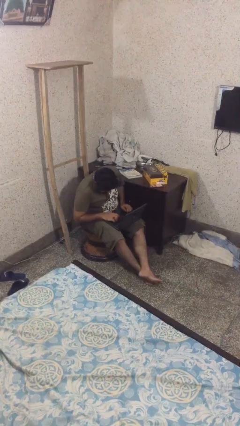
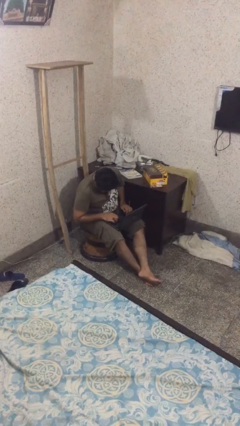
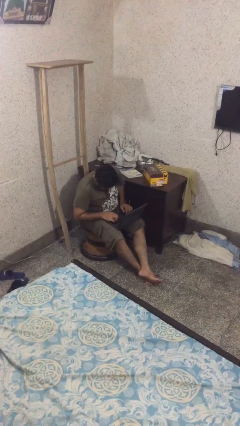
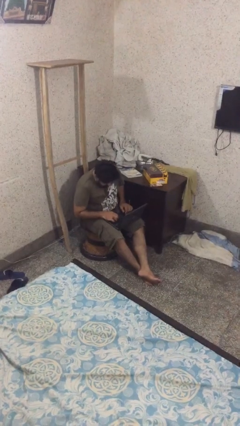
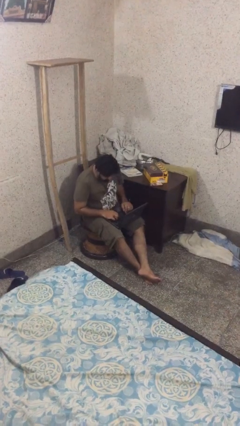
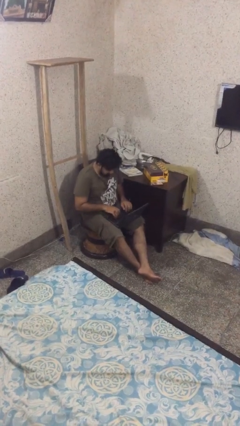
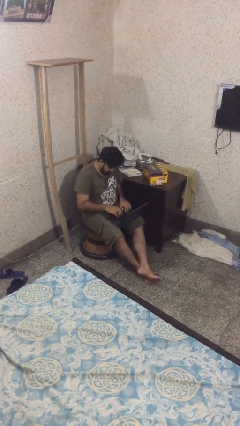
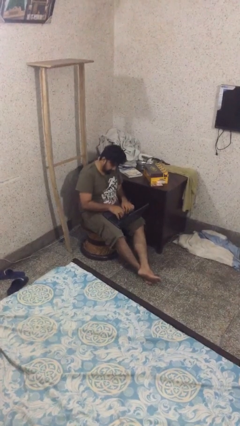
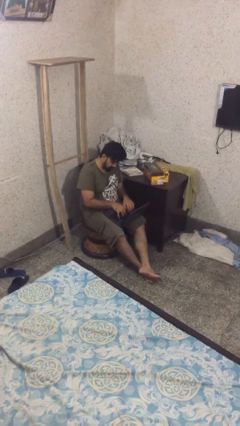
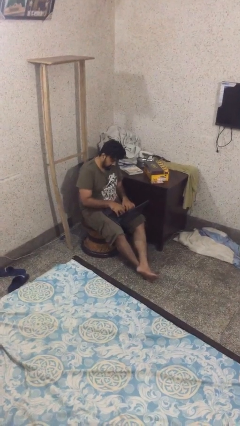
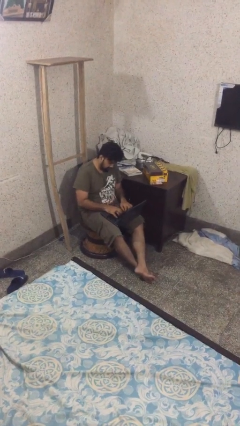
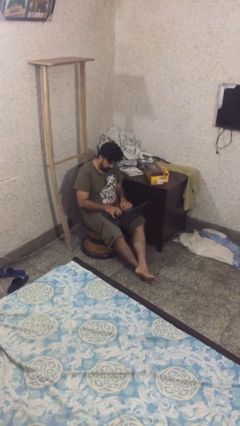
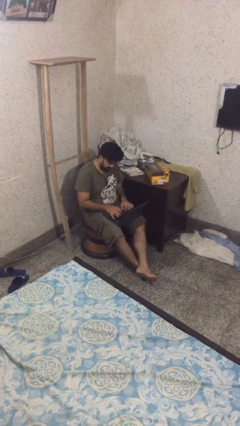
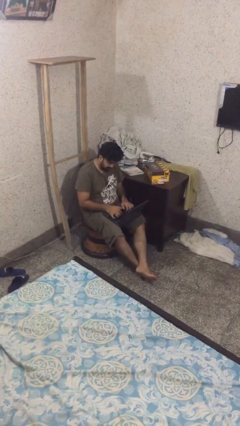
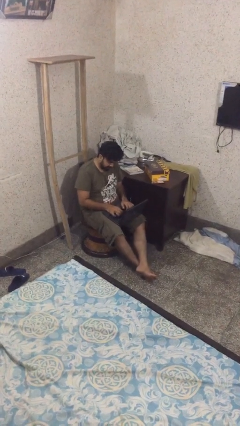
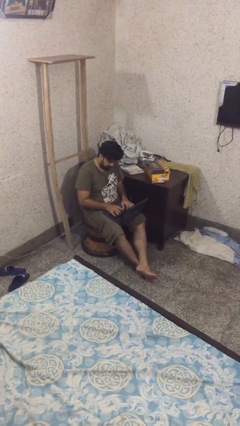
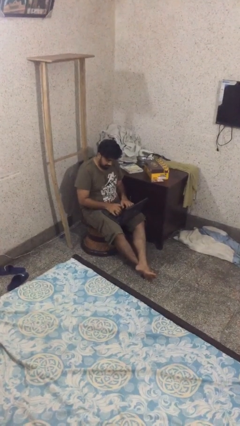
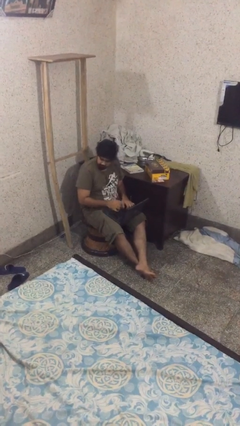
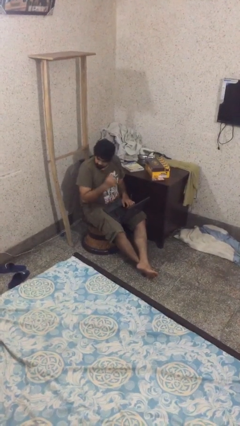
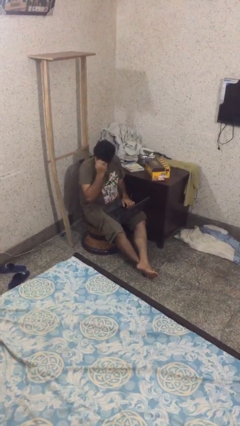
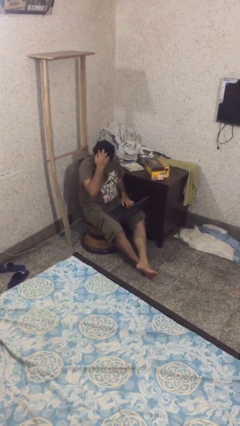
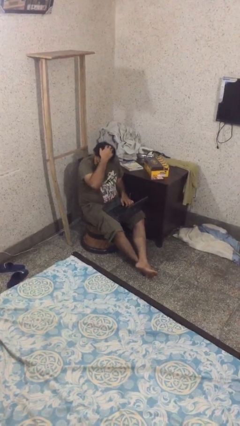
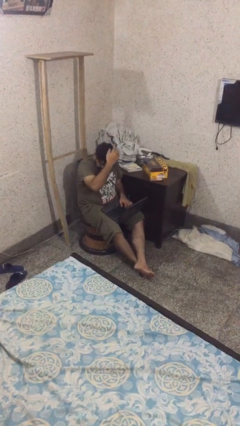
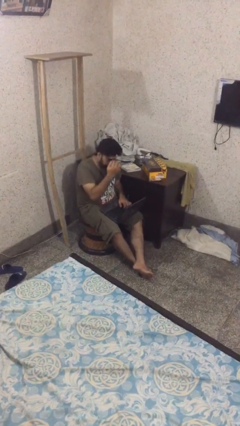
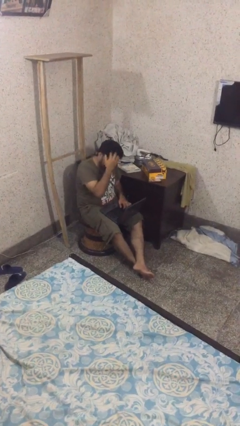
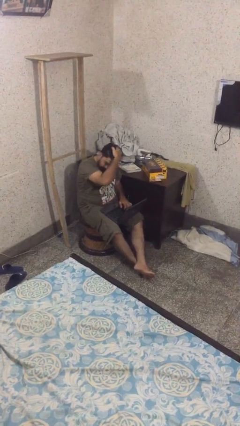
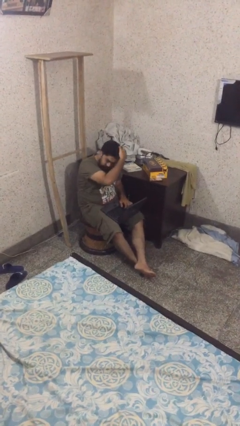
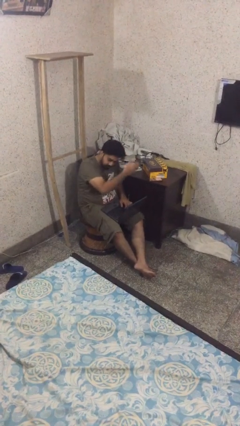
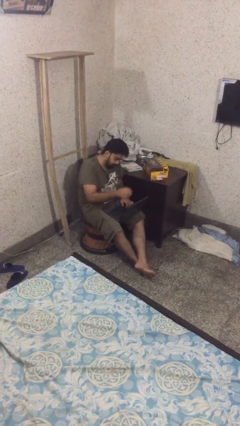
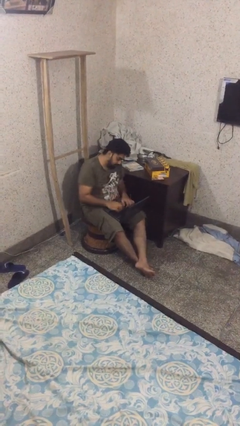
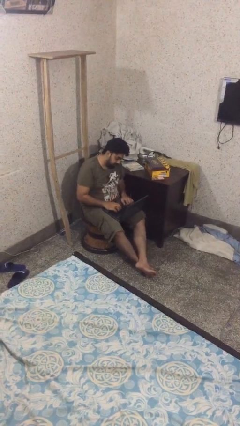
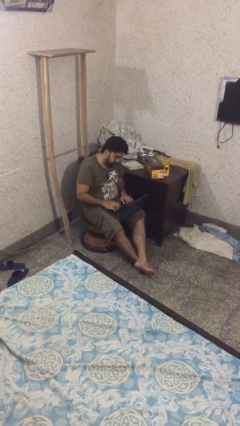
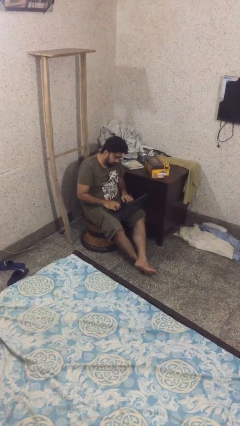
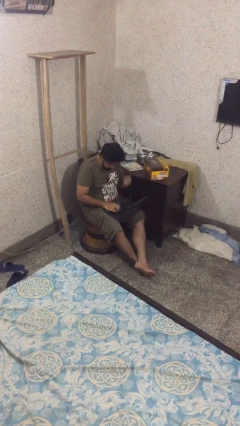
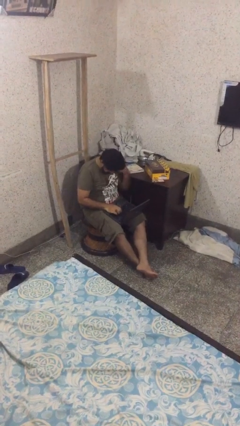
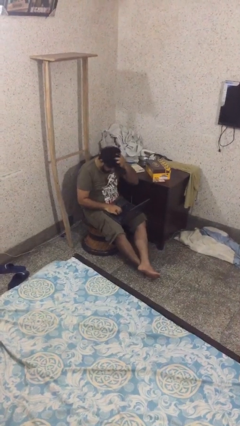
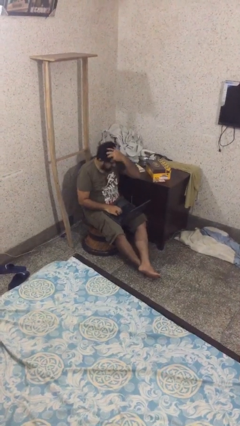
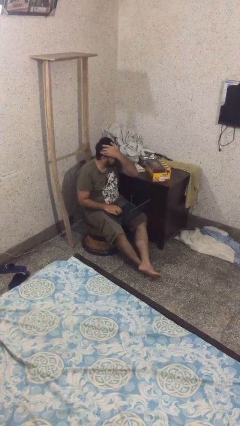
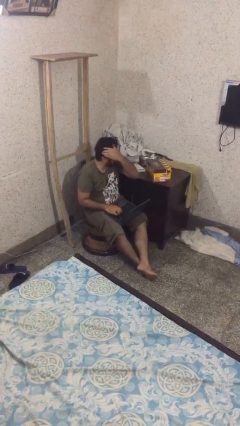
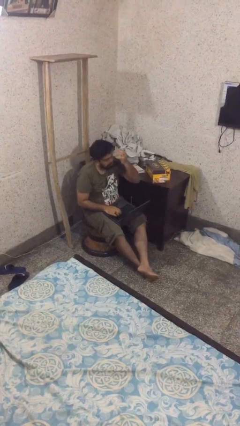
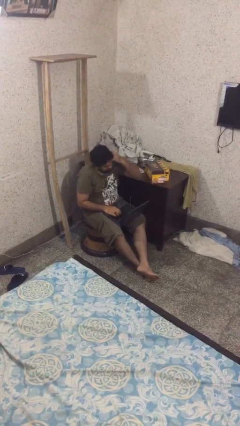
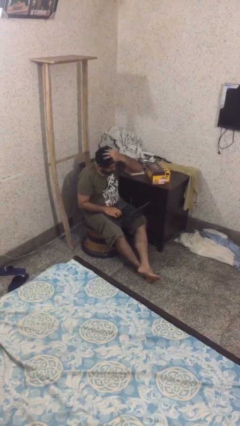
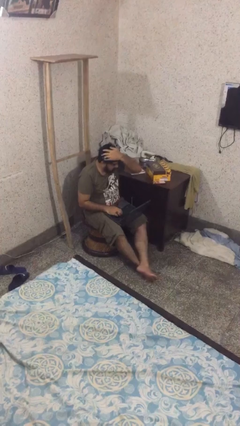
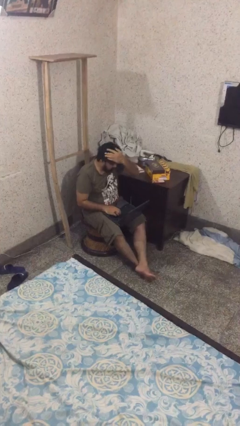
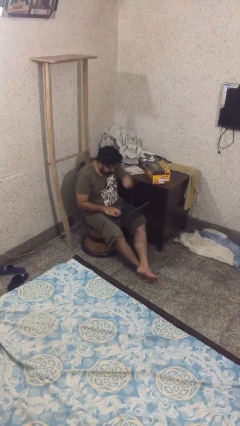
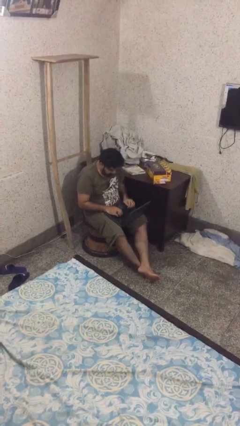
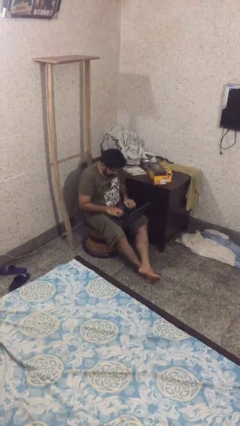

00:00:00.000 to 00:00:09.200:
person interacts with laptop

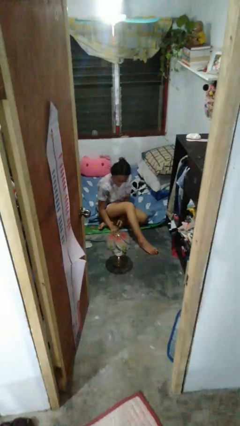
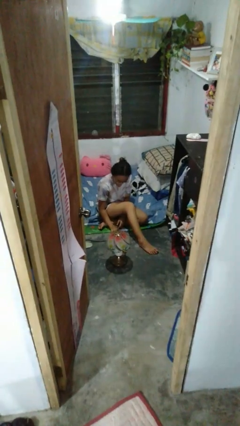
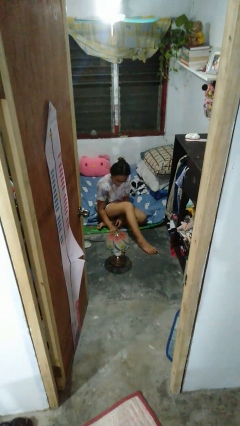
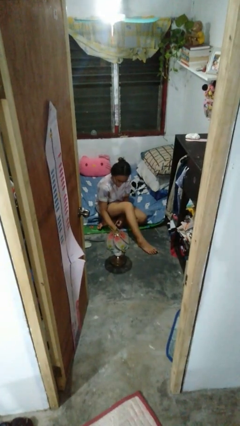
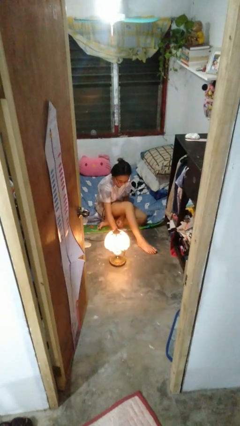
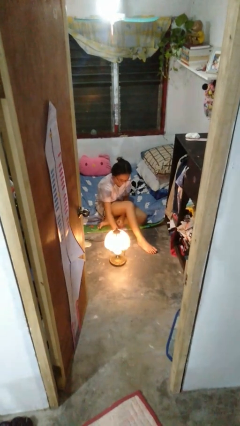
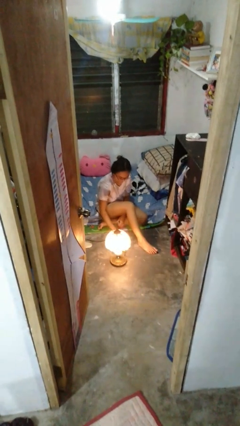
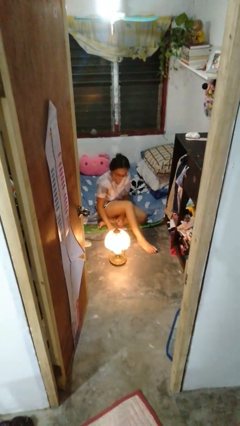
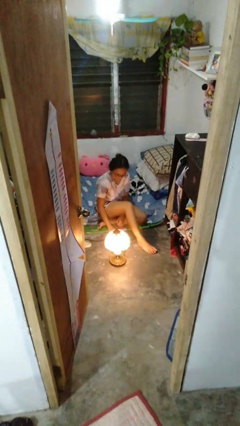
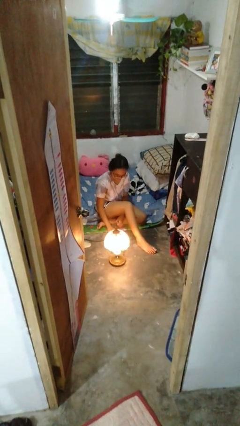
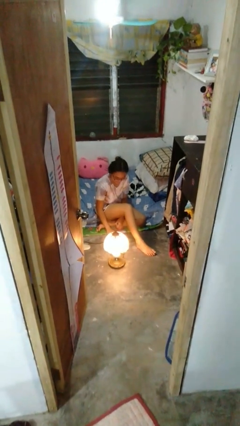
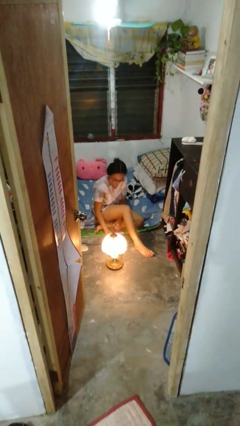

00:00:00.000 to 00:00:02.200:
person turns on lamp

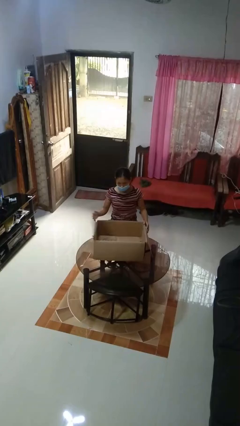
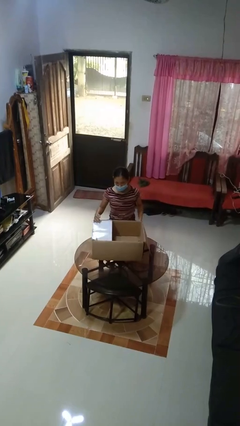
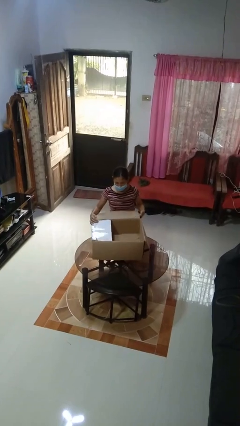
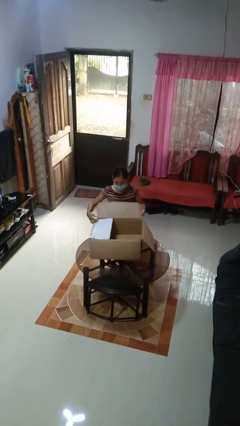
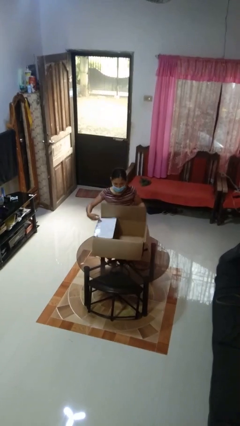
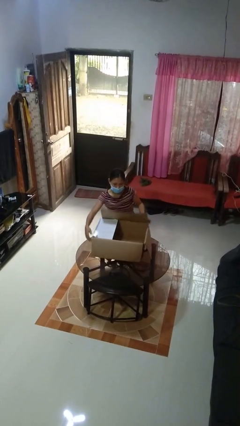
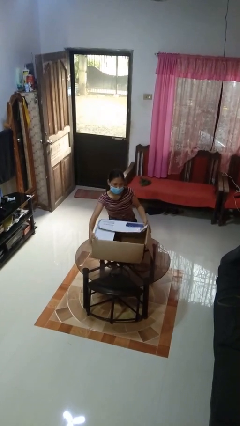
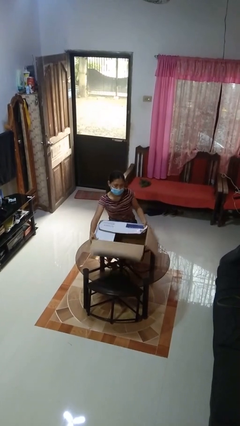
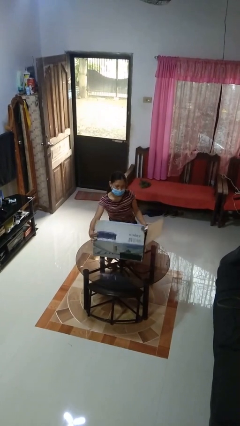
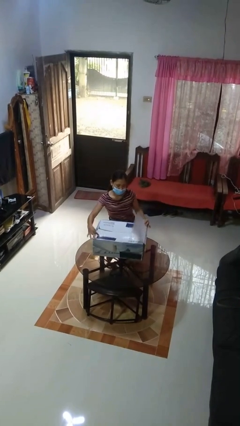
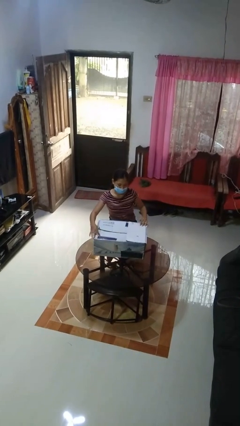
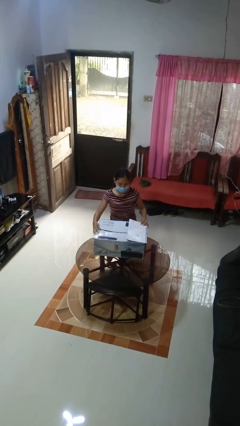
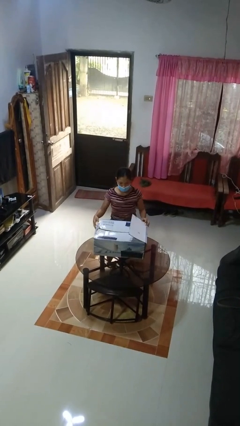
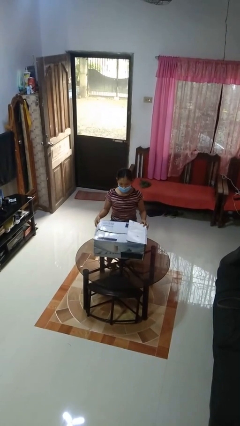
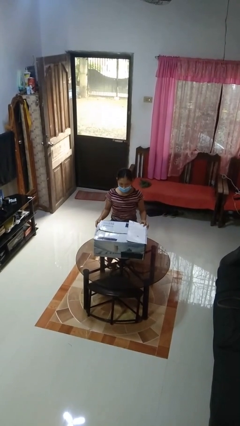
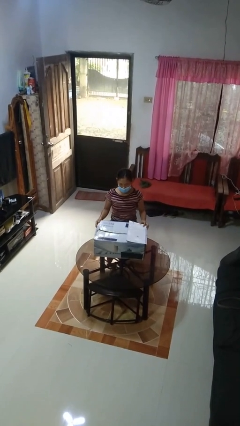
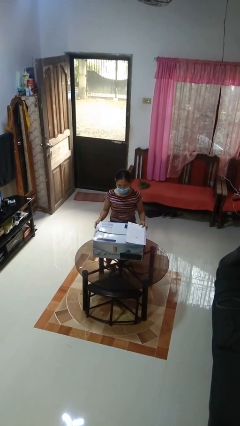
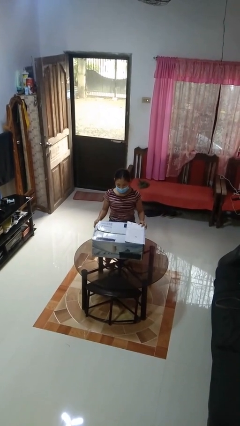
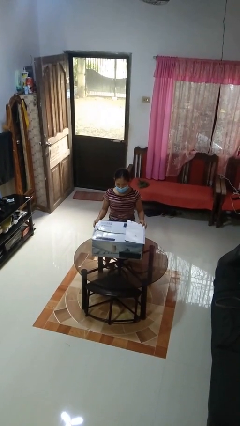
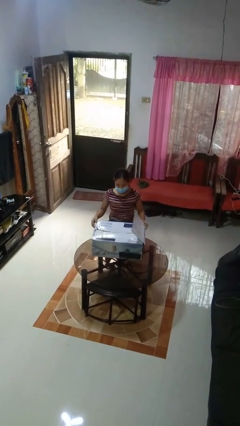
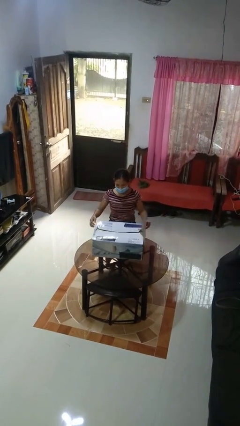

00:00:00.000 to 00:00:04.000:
person closes box

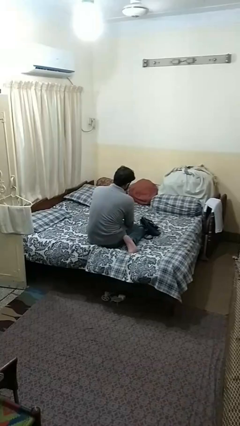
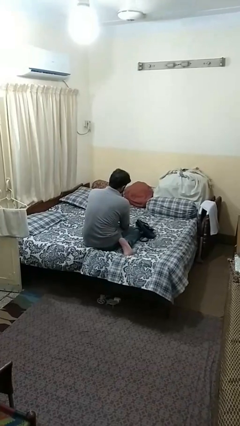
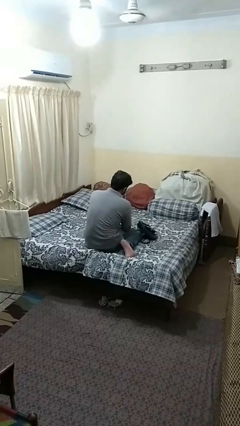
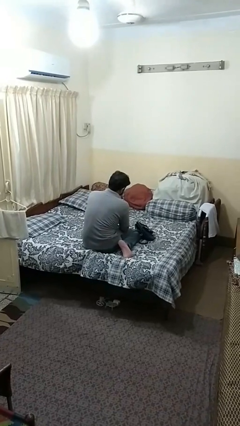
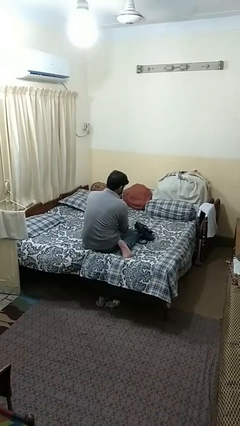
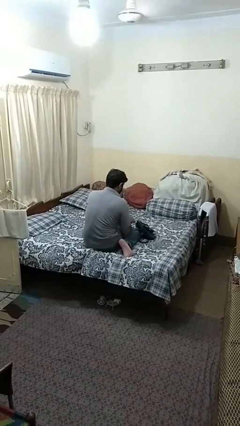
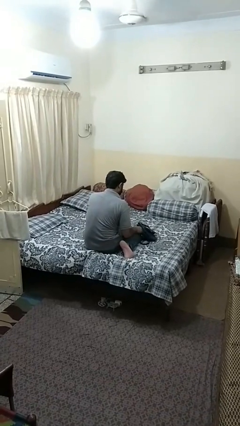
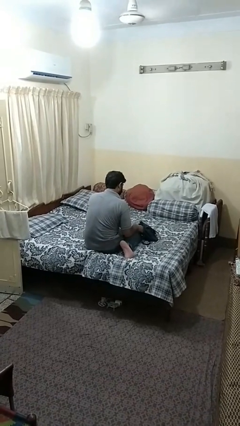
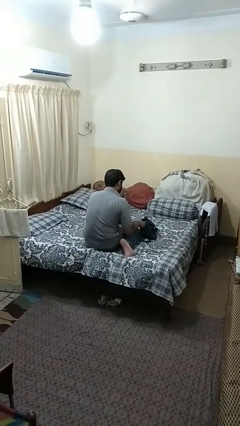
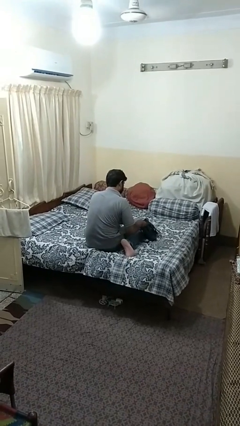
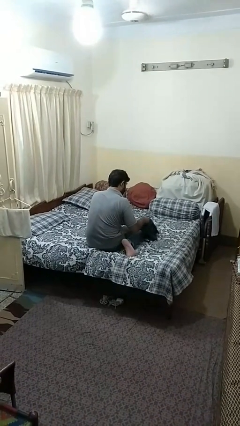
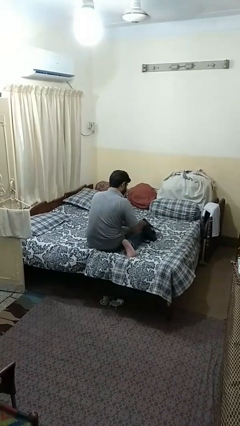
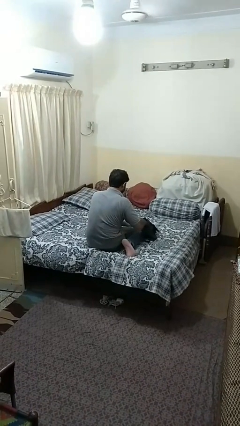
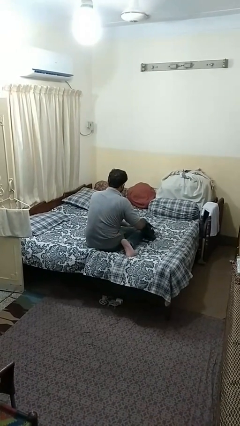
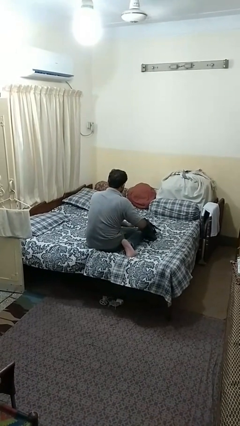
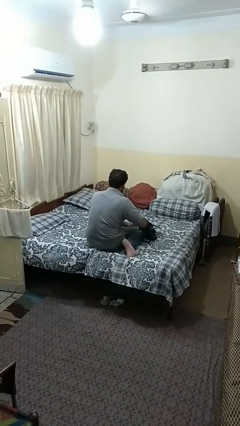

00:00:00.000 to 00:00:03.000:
person searches in purse
